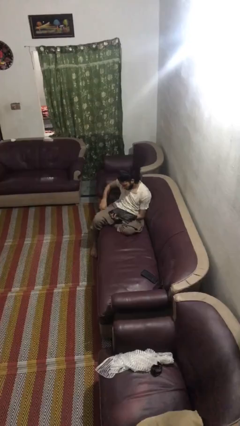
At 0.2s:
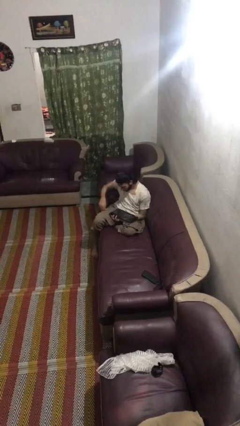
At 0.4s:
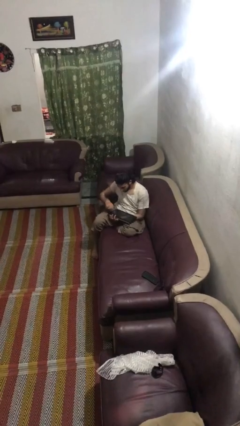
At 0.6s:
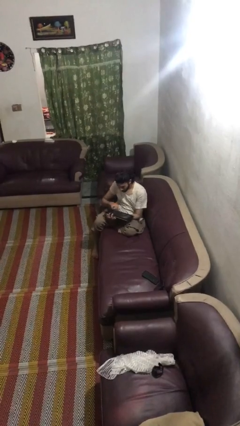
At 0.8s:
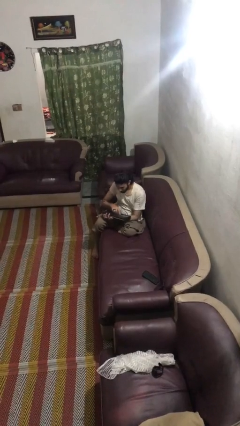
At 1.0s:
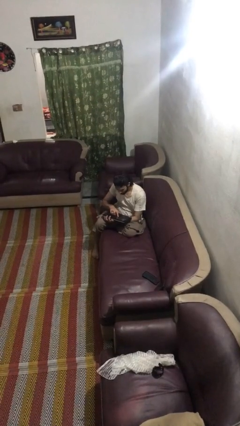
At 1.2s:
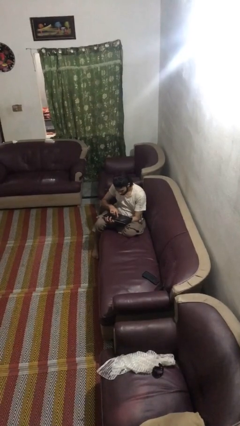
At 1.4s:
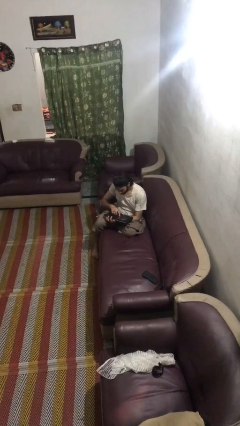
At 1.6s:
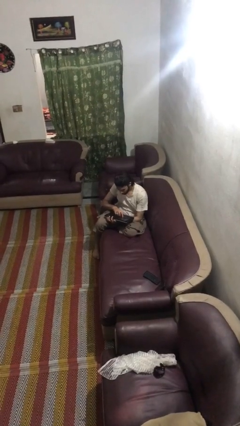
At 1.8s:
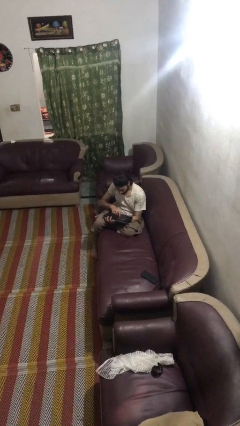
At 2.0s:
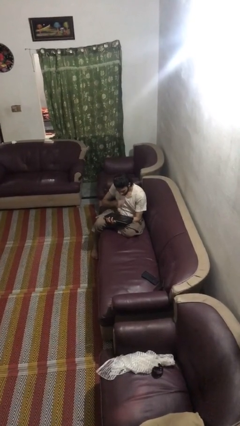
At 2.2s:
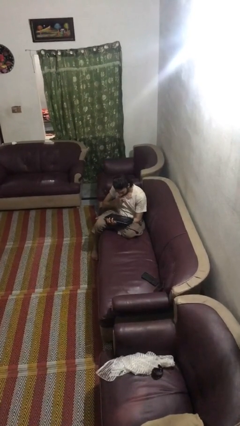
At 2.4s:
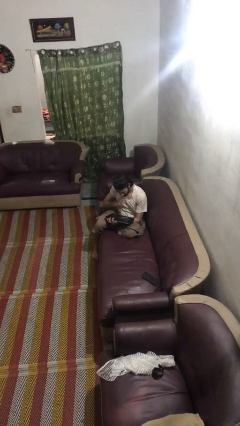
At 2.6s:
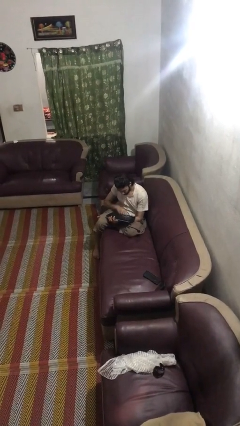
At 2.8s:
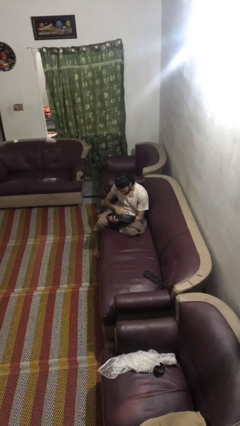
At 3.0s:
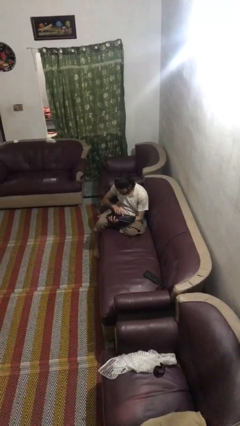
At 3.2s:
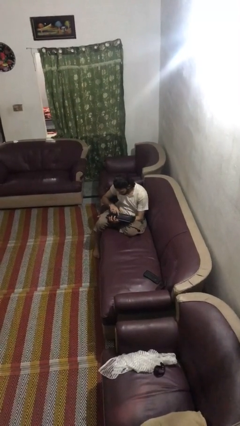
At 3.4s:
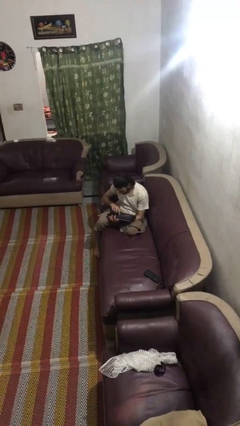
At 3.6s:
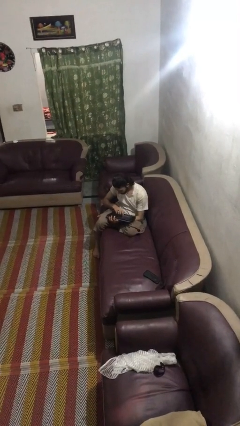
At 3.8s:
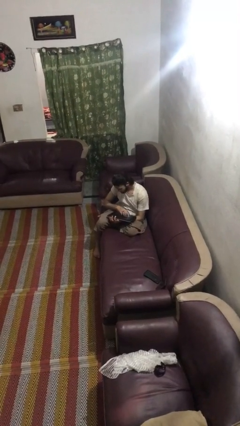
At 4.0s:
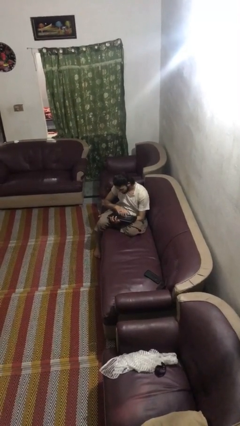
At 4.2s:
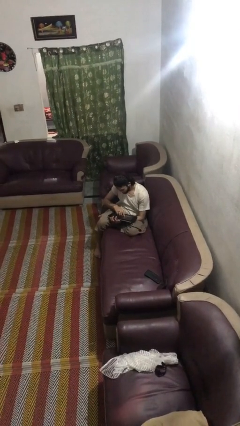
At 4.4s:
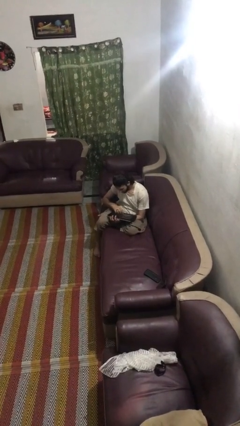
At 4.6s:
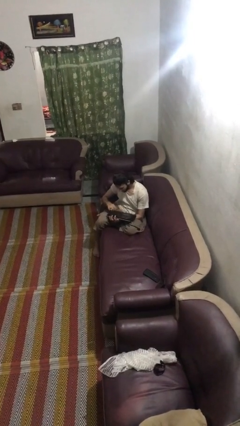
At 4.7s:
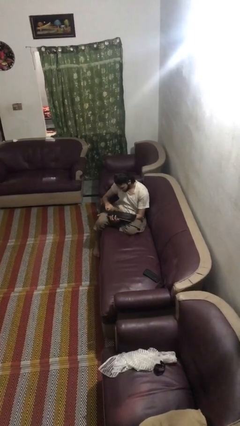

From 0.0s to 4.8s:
person interacts with tablet

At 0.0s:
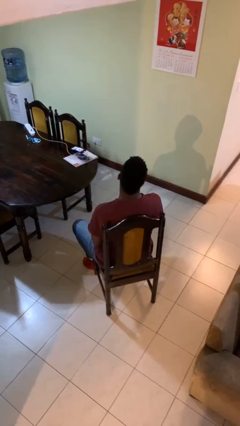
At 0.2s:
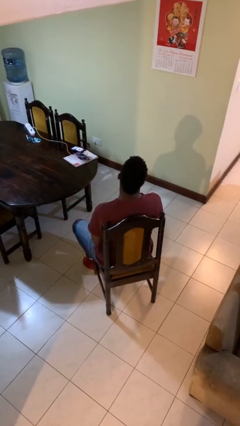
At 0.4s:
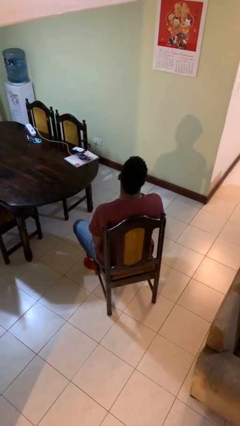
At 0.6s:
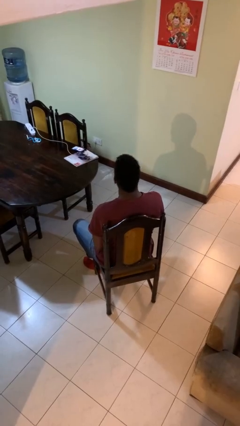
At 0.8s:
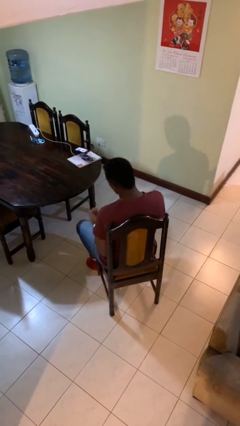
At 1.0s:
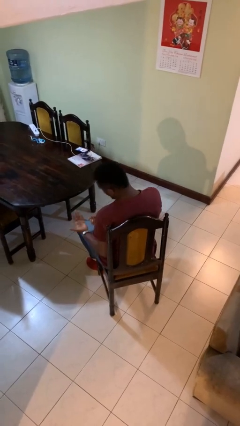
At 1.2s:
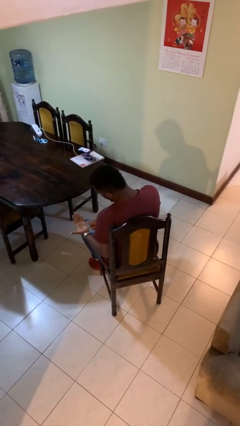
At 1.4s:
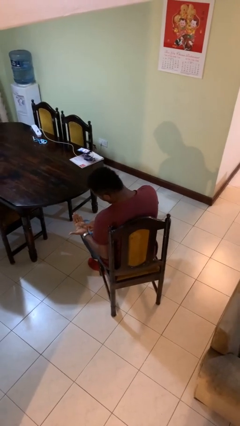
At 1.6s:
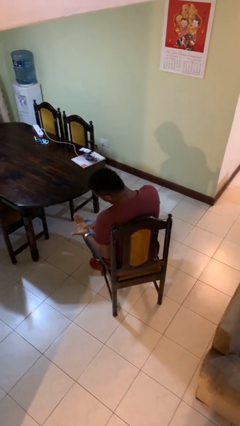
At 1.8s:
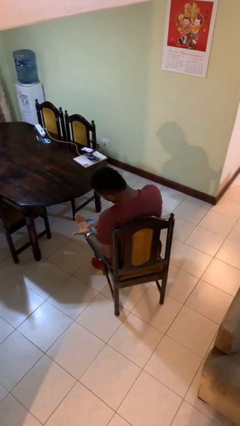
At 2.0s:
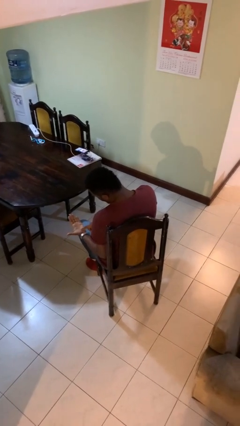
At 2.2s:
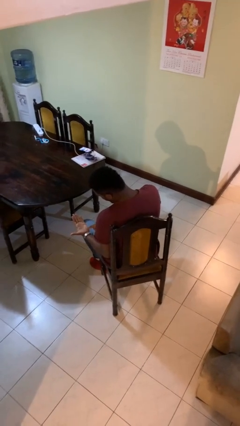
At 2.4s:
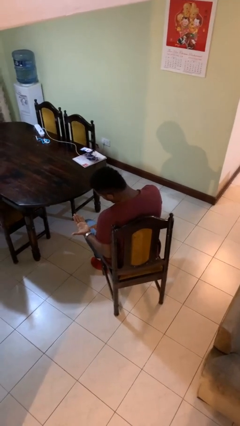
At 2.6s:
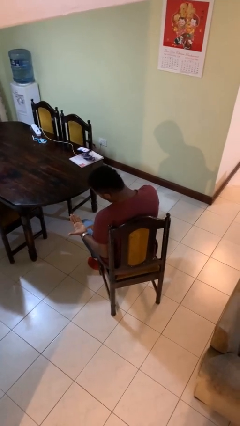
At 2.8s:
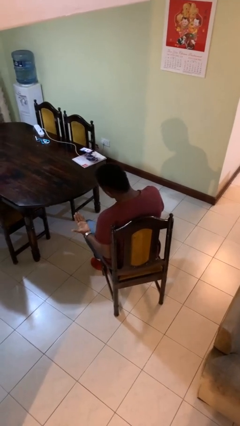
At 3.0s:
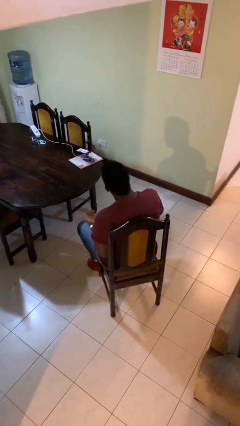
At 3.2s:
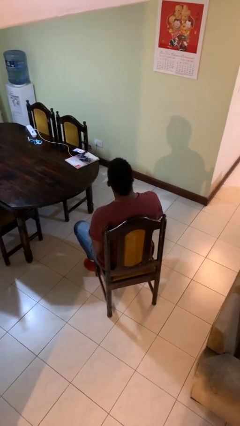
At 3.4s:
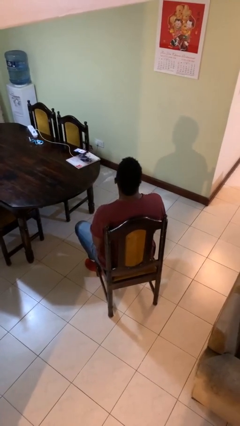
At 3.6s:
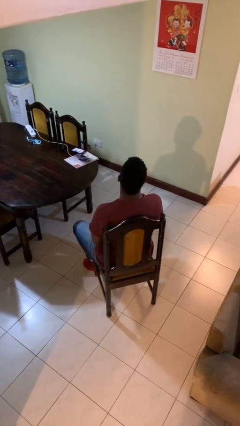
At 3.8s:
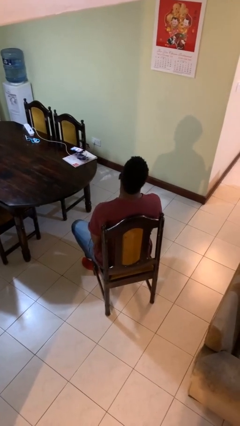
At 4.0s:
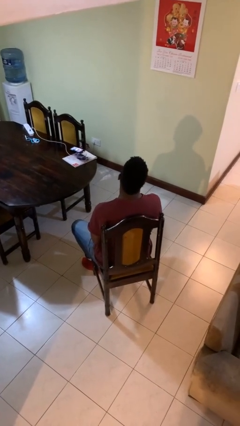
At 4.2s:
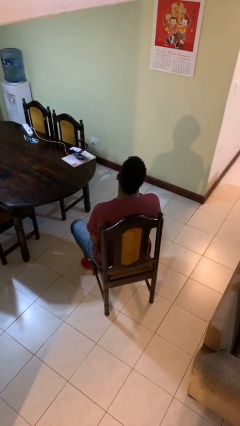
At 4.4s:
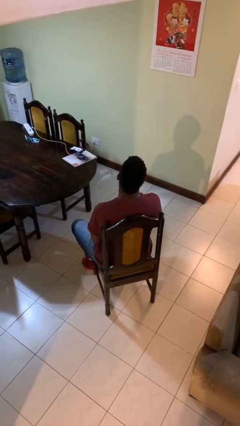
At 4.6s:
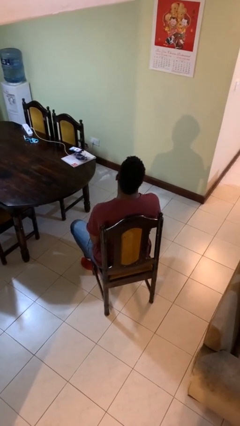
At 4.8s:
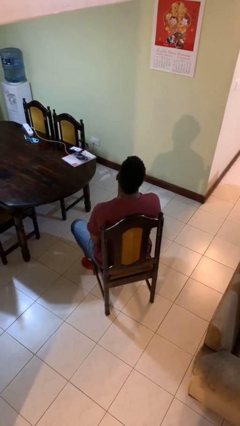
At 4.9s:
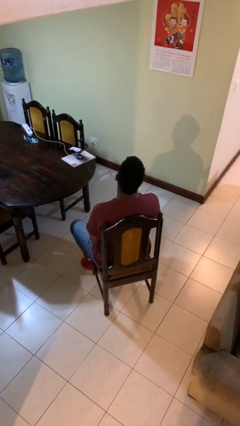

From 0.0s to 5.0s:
person looks at hands in lap

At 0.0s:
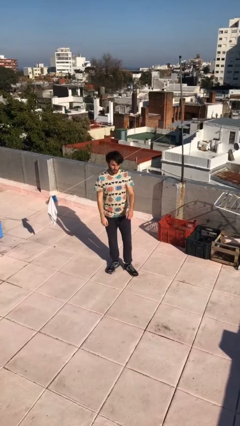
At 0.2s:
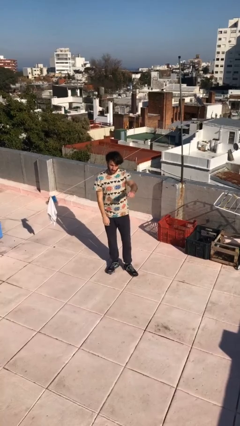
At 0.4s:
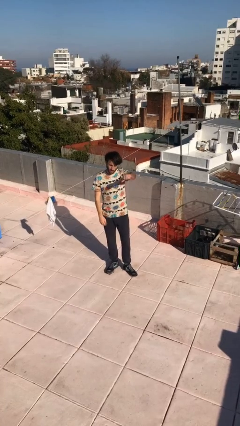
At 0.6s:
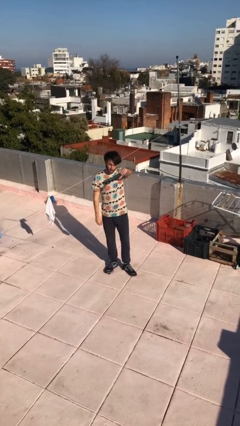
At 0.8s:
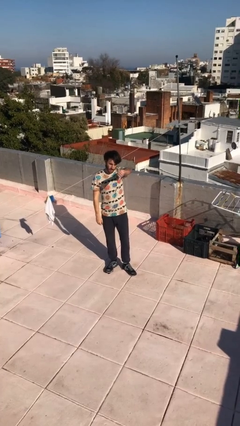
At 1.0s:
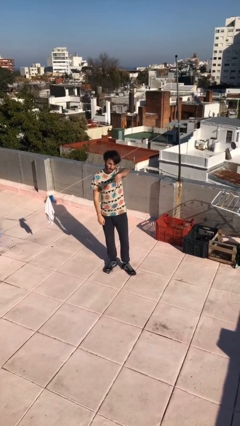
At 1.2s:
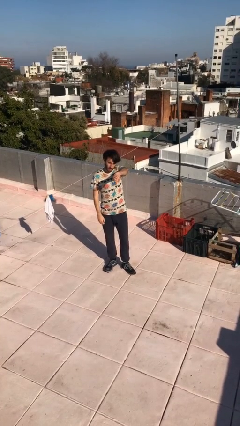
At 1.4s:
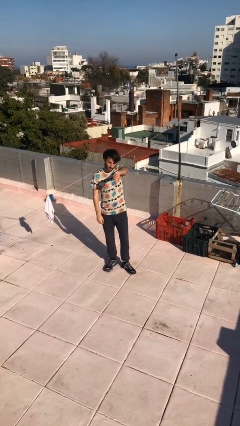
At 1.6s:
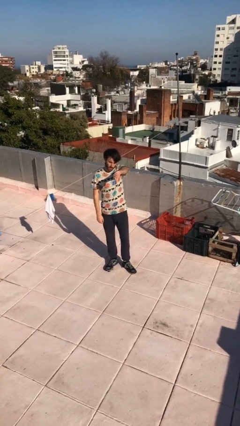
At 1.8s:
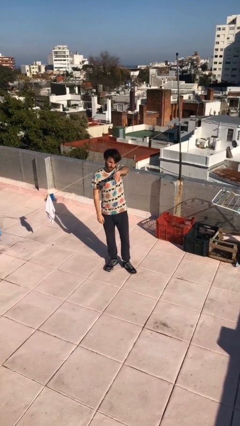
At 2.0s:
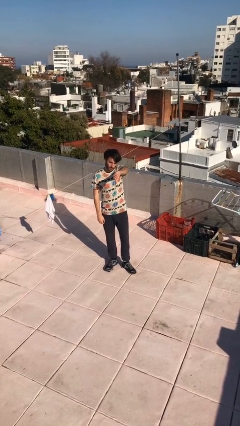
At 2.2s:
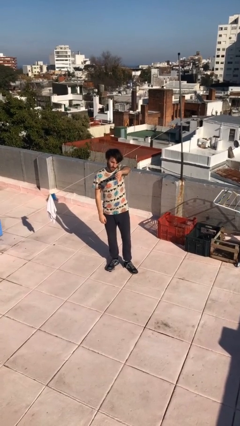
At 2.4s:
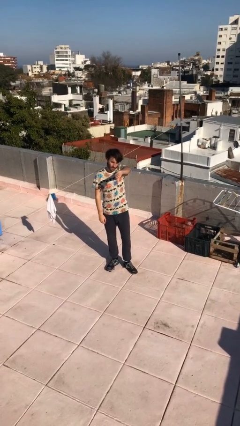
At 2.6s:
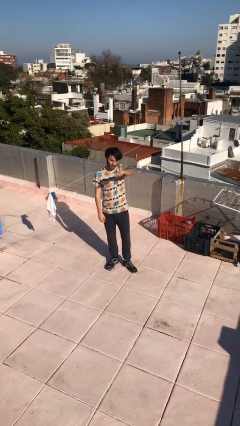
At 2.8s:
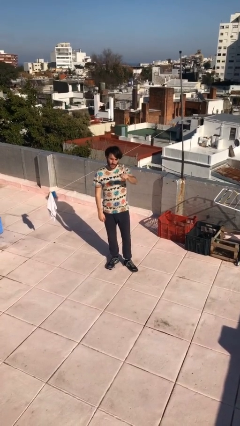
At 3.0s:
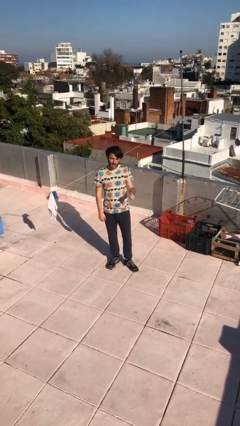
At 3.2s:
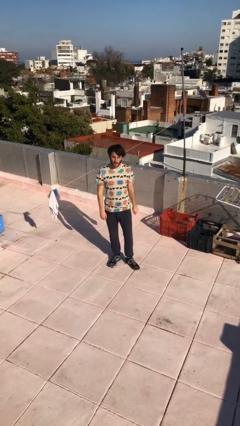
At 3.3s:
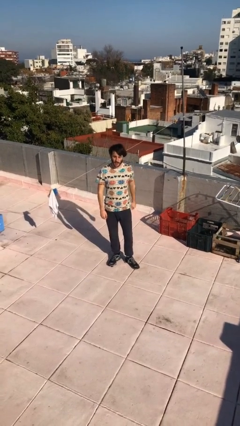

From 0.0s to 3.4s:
person gestures thumbs down

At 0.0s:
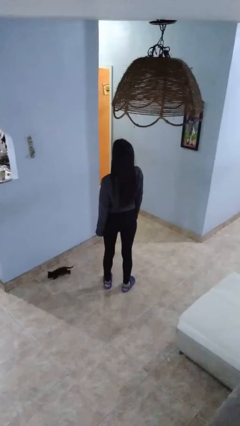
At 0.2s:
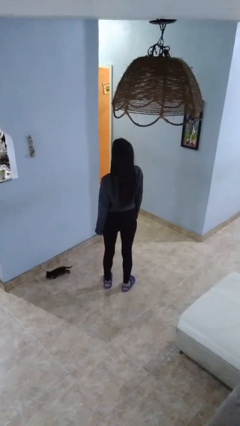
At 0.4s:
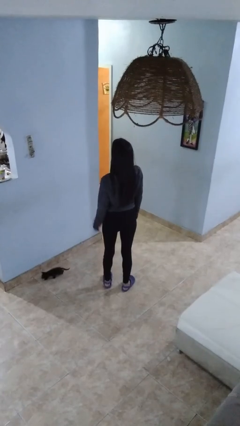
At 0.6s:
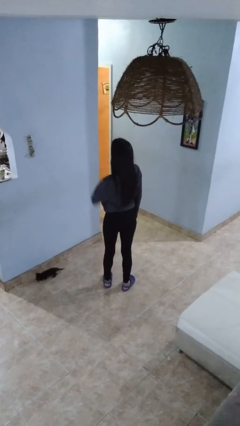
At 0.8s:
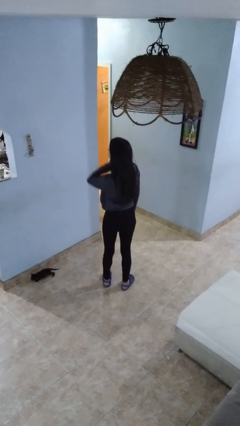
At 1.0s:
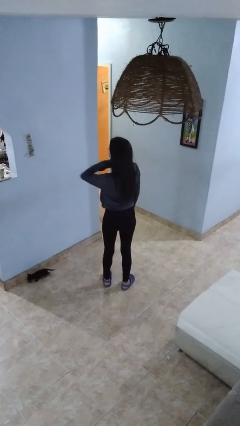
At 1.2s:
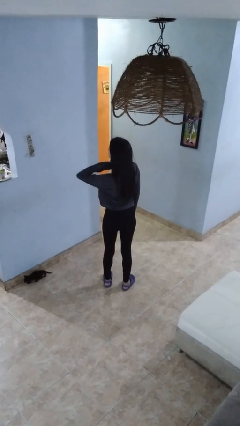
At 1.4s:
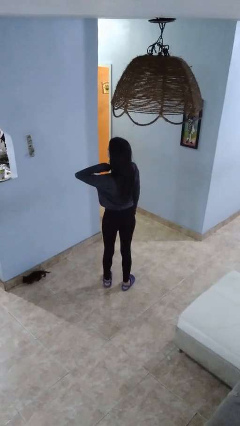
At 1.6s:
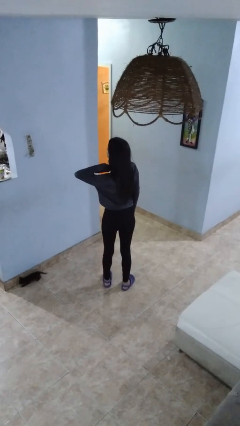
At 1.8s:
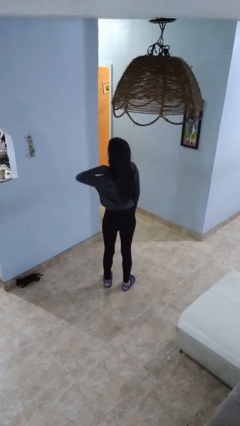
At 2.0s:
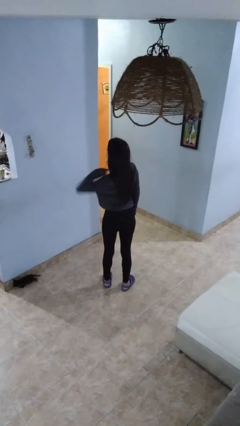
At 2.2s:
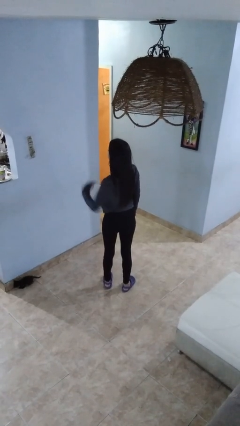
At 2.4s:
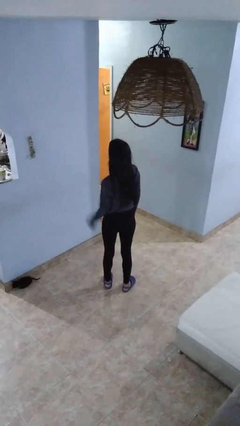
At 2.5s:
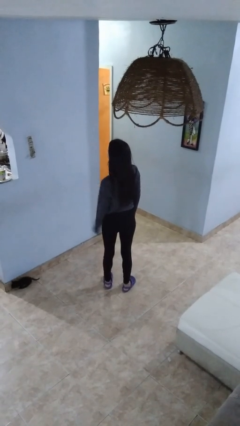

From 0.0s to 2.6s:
person gestures cut

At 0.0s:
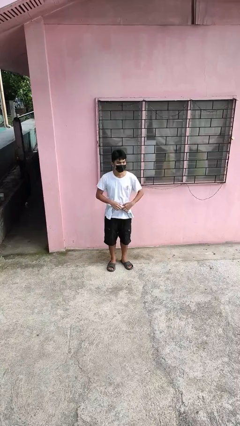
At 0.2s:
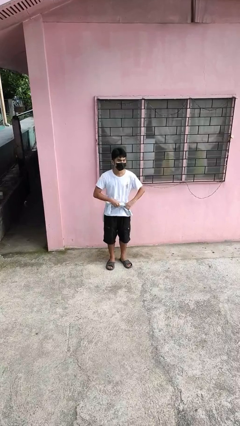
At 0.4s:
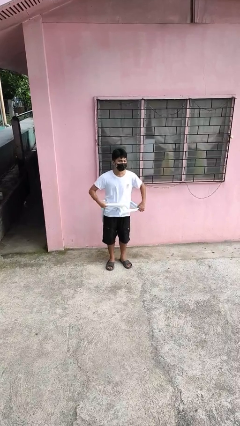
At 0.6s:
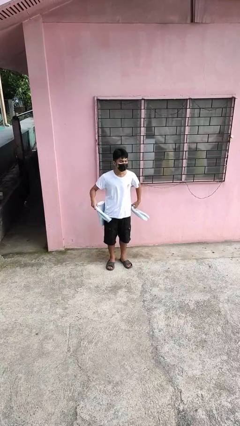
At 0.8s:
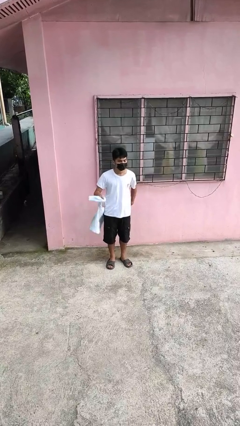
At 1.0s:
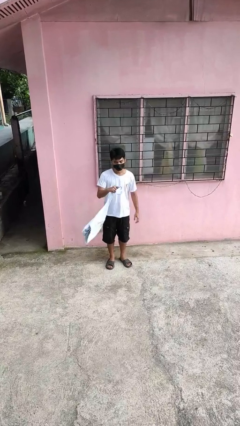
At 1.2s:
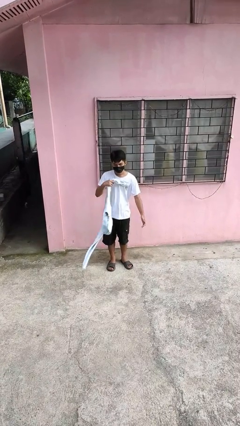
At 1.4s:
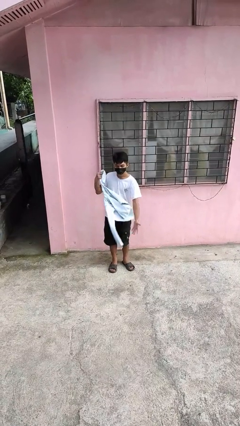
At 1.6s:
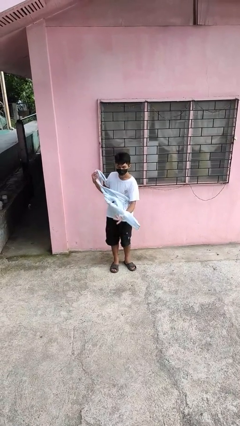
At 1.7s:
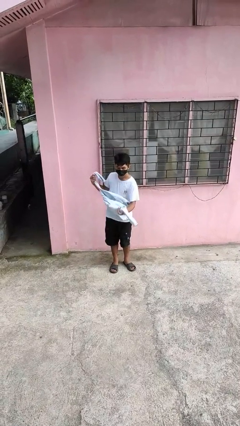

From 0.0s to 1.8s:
person unties jacket around waist
